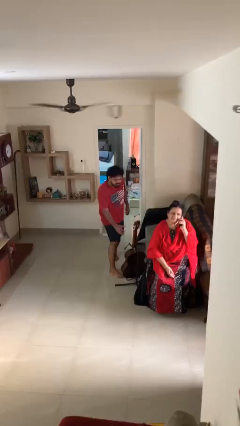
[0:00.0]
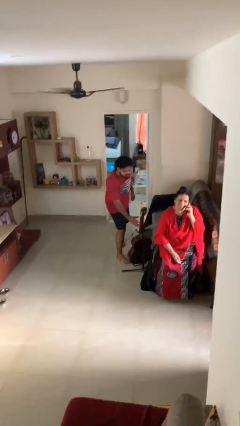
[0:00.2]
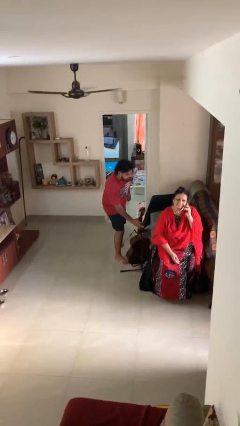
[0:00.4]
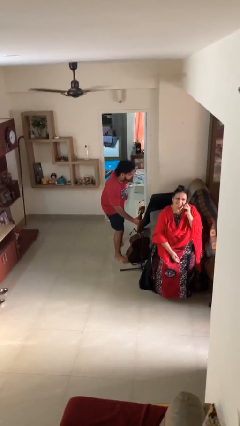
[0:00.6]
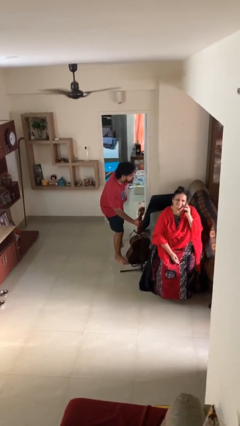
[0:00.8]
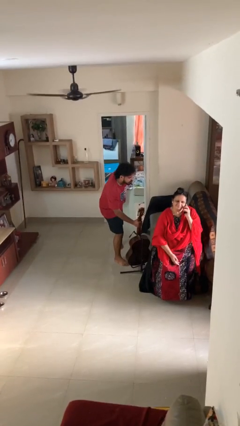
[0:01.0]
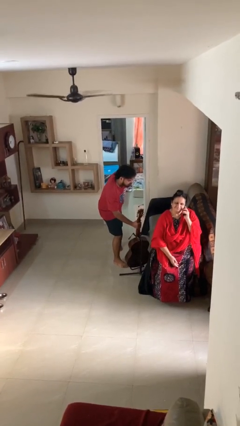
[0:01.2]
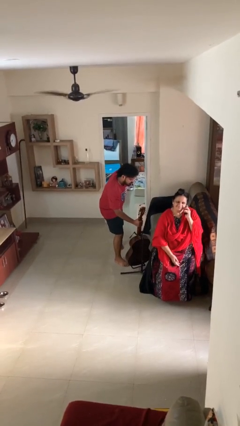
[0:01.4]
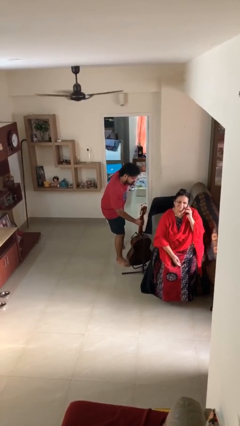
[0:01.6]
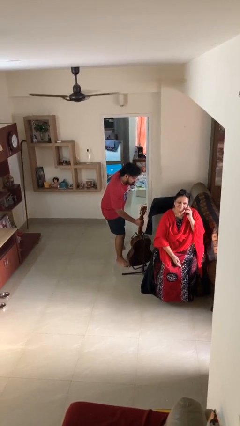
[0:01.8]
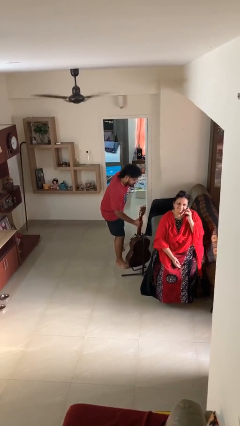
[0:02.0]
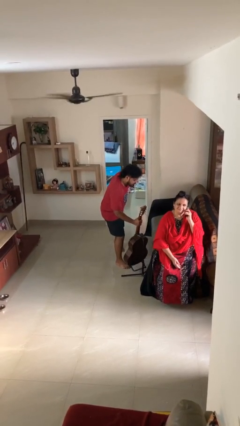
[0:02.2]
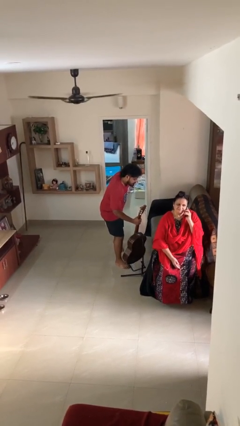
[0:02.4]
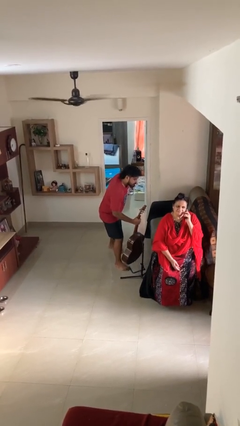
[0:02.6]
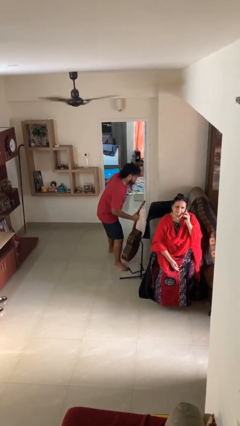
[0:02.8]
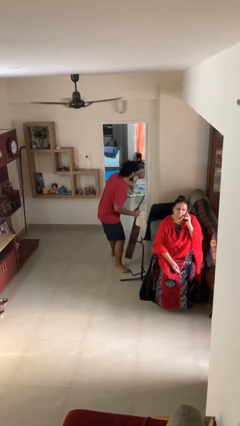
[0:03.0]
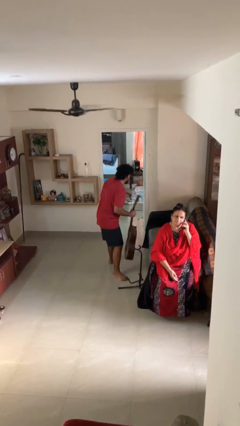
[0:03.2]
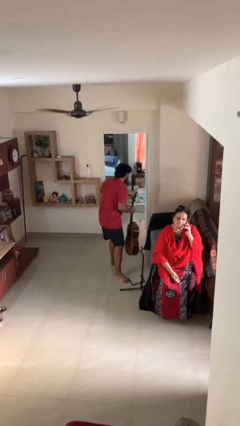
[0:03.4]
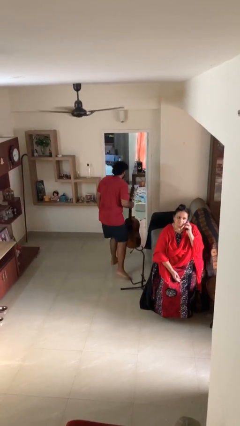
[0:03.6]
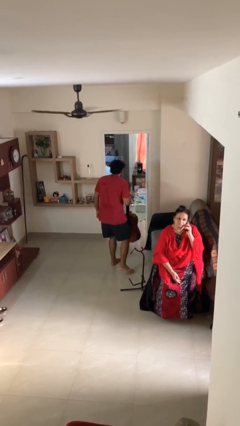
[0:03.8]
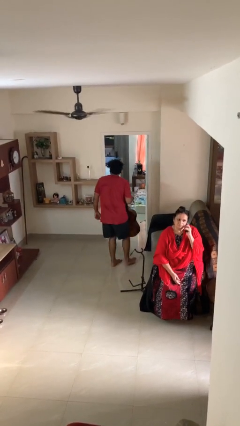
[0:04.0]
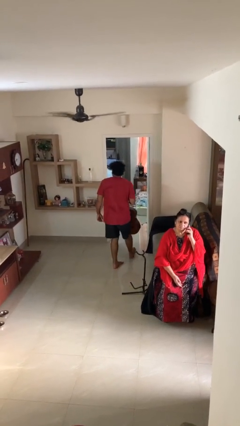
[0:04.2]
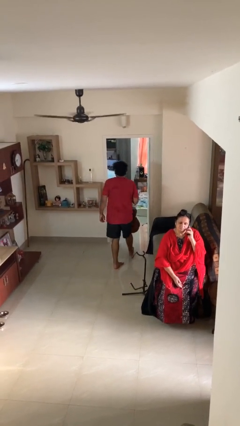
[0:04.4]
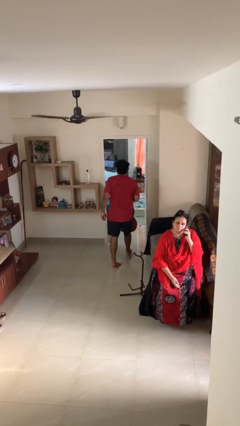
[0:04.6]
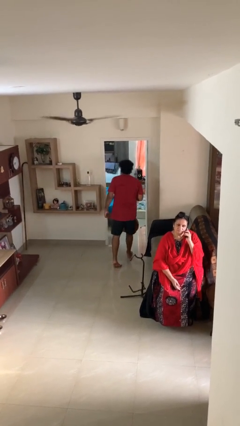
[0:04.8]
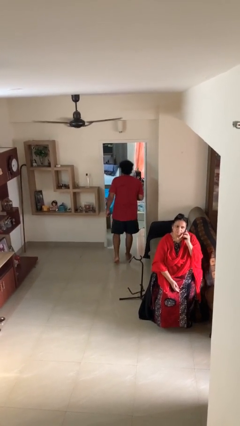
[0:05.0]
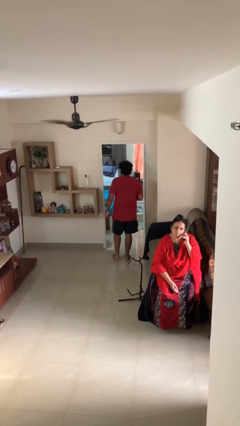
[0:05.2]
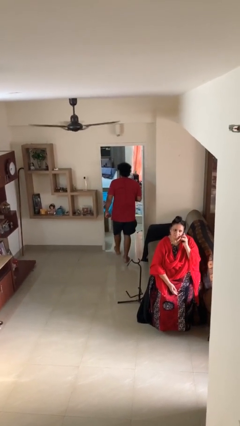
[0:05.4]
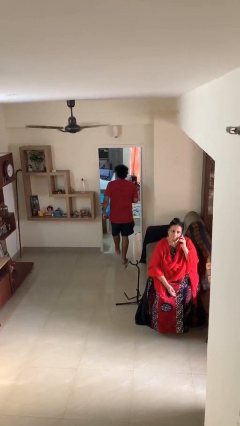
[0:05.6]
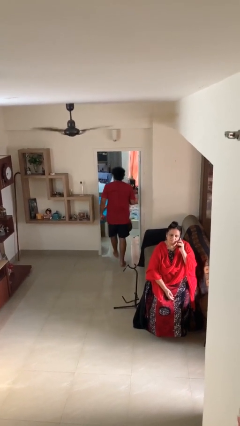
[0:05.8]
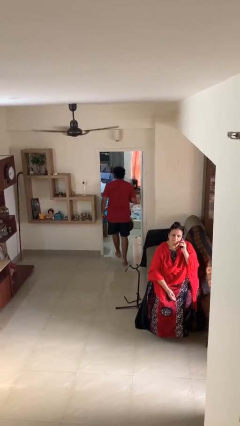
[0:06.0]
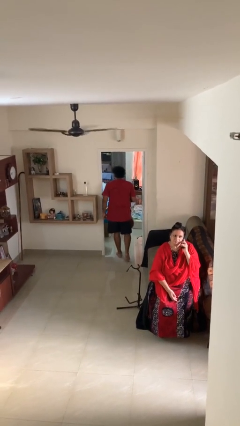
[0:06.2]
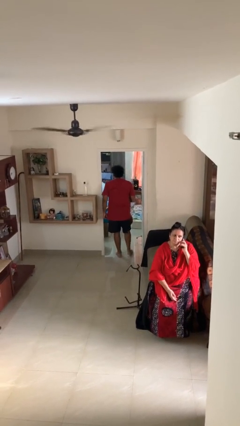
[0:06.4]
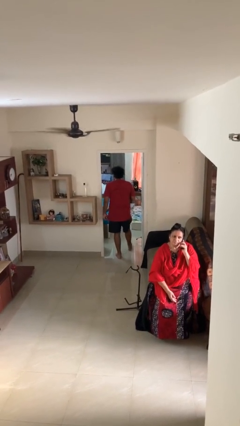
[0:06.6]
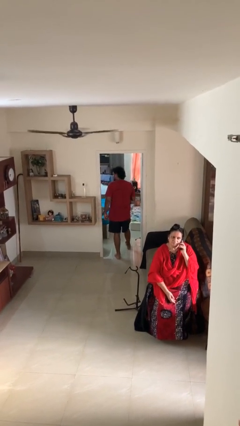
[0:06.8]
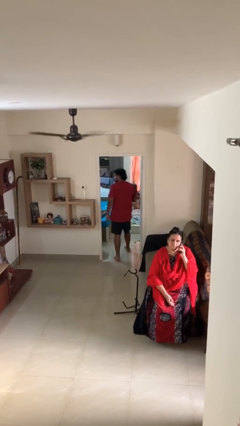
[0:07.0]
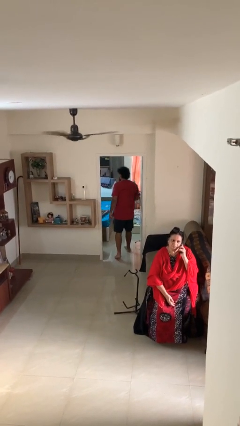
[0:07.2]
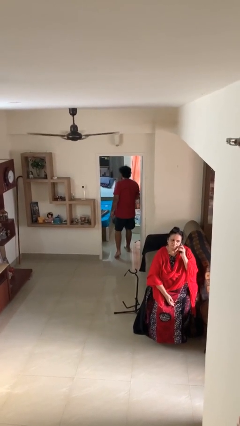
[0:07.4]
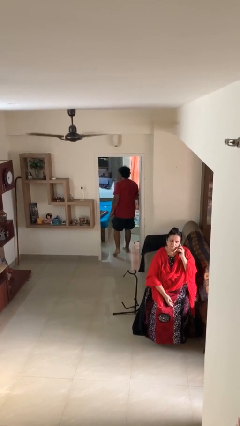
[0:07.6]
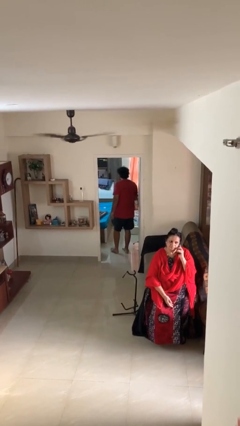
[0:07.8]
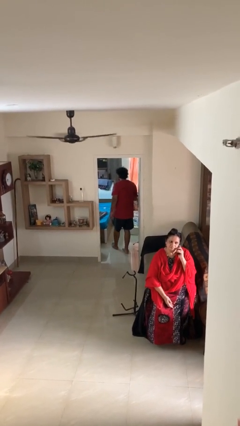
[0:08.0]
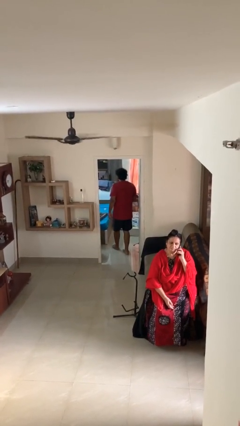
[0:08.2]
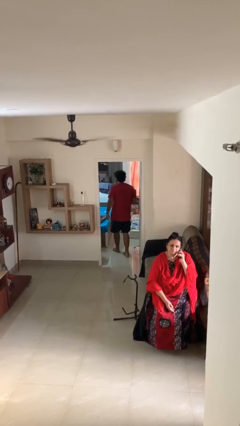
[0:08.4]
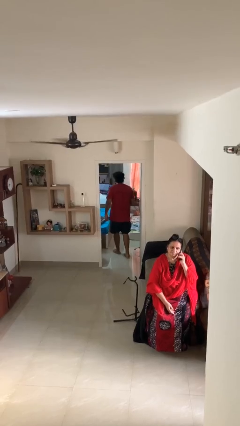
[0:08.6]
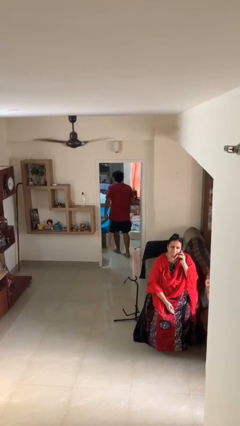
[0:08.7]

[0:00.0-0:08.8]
person steals object from person

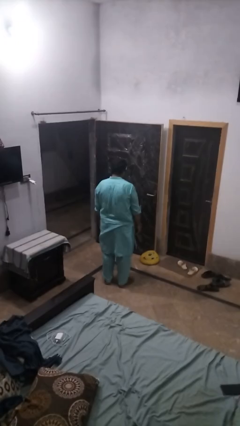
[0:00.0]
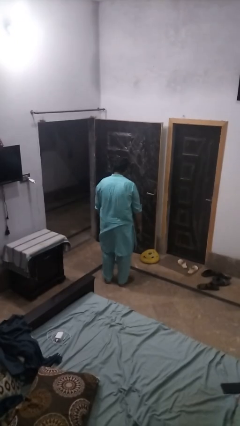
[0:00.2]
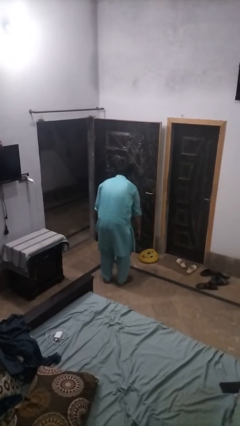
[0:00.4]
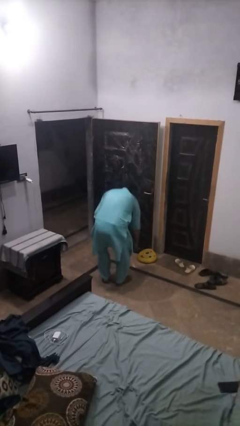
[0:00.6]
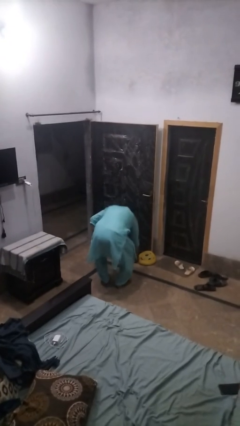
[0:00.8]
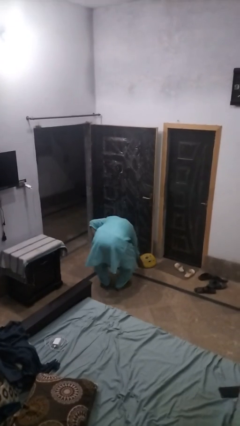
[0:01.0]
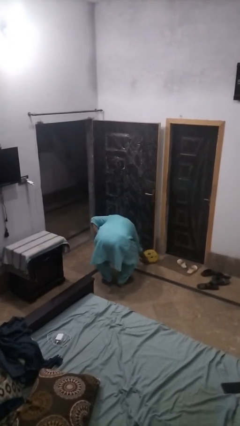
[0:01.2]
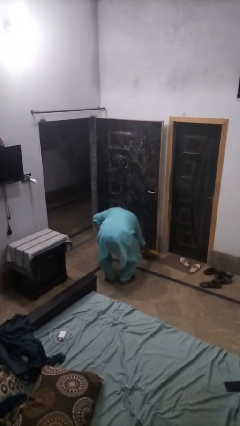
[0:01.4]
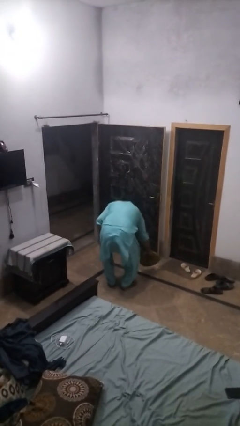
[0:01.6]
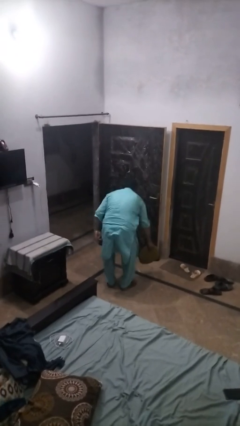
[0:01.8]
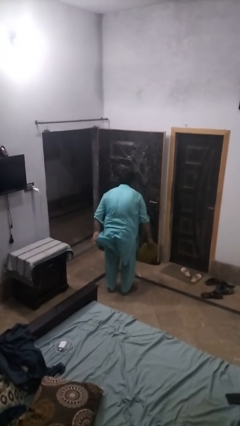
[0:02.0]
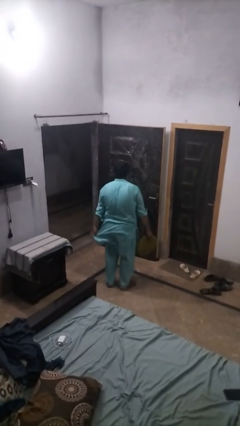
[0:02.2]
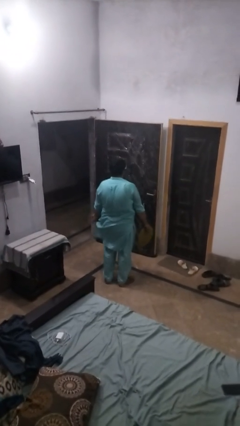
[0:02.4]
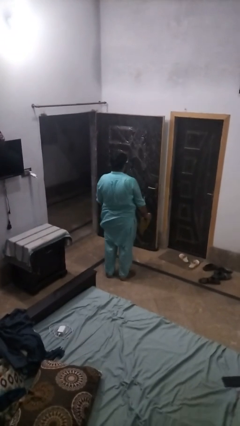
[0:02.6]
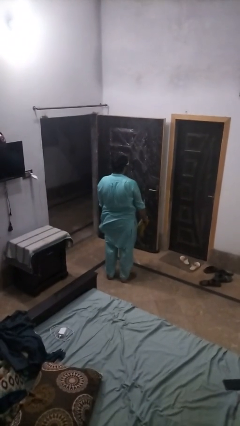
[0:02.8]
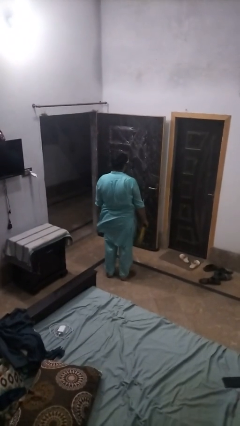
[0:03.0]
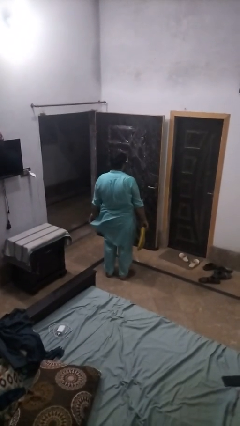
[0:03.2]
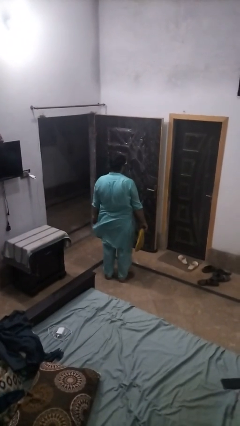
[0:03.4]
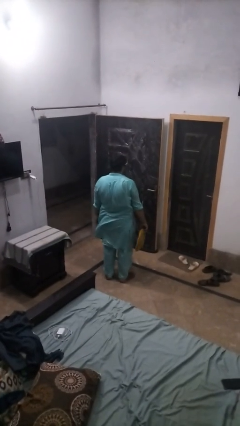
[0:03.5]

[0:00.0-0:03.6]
person picks up object from floor

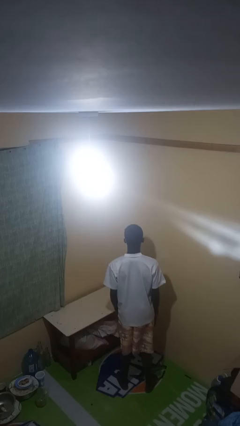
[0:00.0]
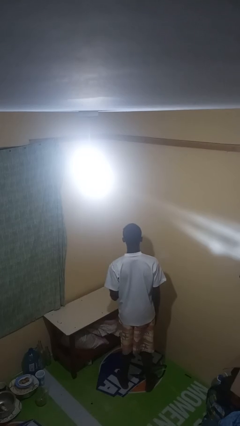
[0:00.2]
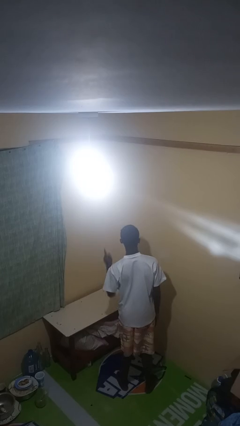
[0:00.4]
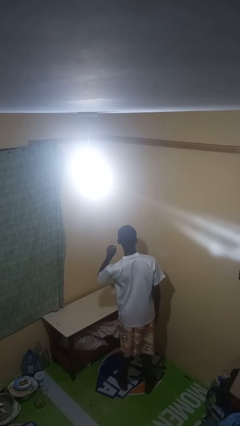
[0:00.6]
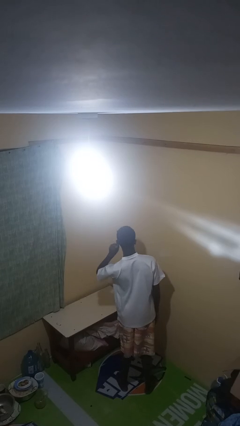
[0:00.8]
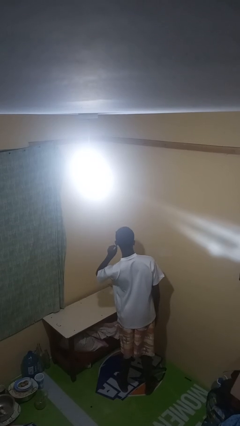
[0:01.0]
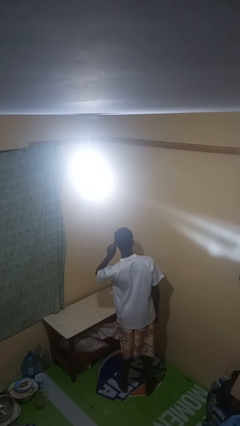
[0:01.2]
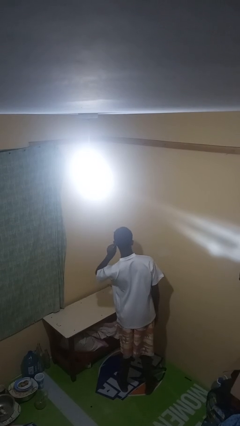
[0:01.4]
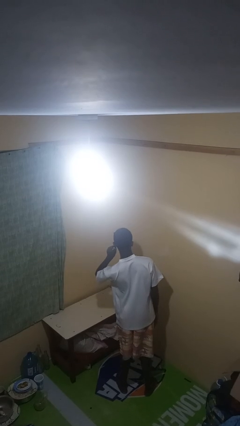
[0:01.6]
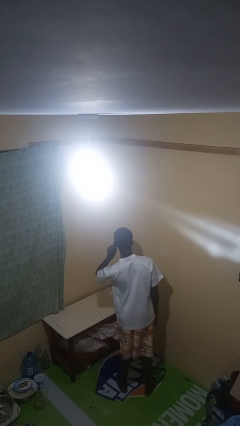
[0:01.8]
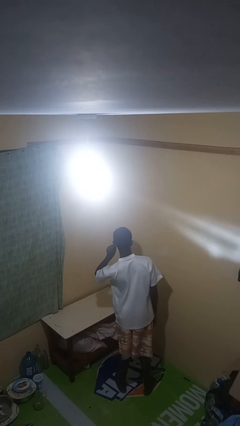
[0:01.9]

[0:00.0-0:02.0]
person gestures listen closely

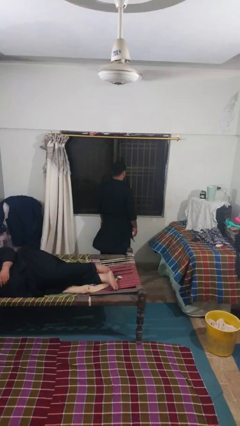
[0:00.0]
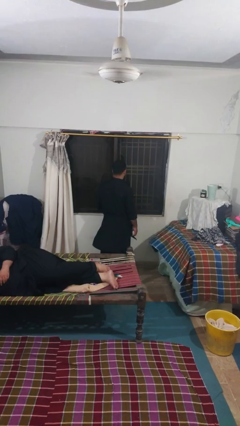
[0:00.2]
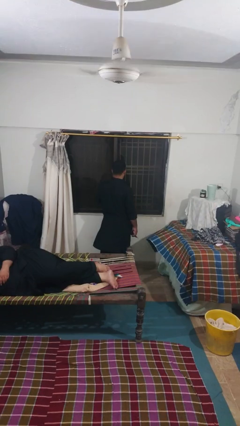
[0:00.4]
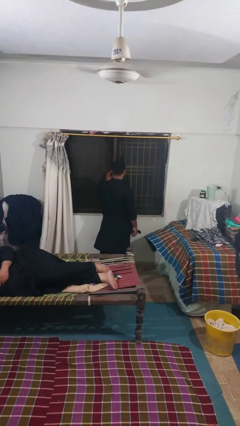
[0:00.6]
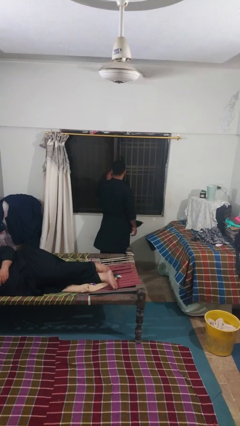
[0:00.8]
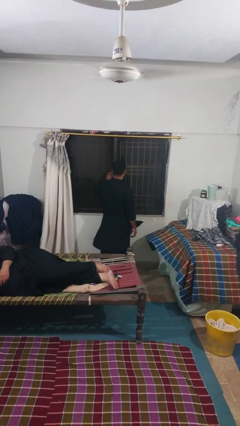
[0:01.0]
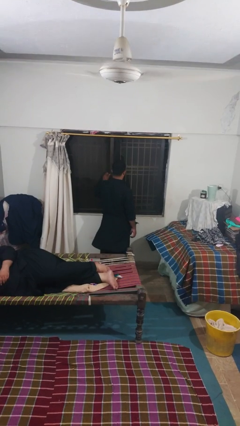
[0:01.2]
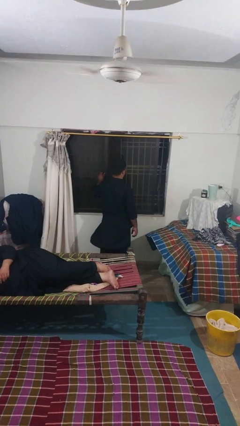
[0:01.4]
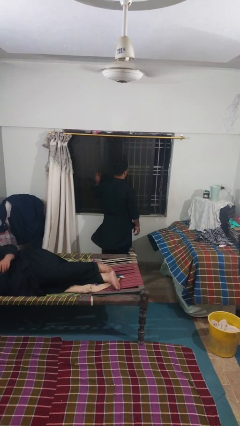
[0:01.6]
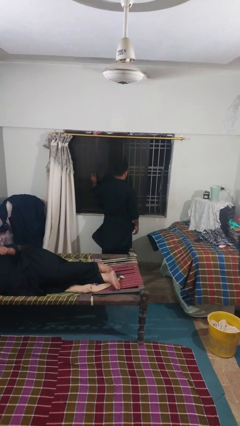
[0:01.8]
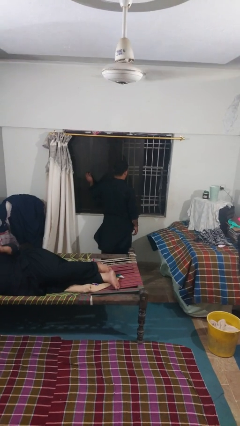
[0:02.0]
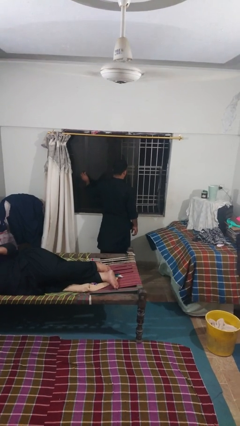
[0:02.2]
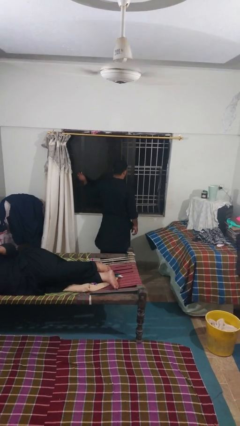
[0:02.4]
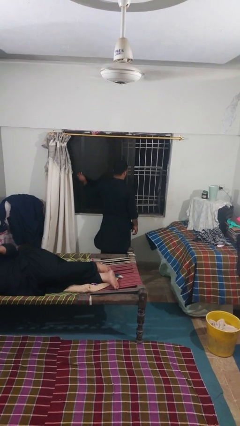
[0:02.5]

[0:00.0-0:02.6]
person opens sliding door

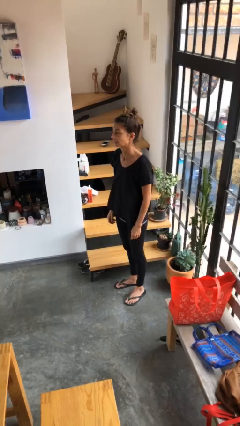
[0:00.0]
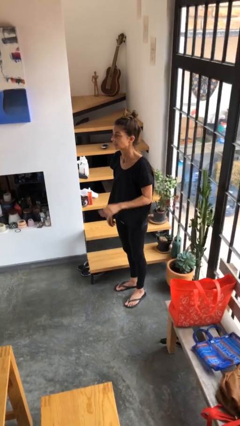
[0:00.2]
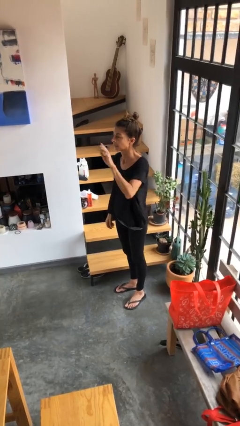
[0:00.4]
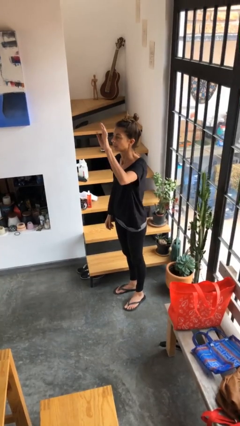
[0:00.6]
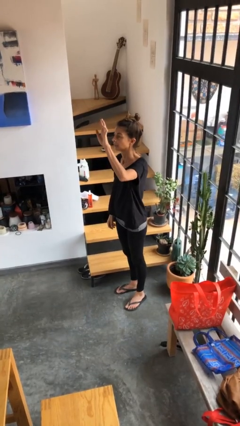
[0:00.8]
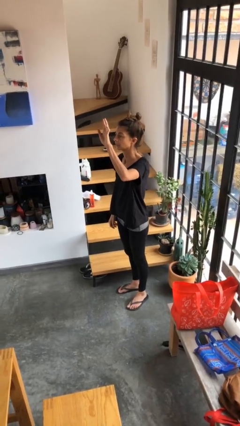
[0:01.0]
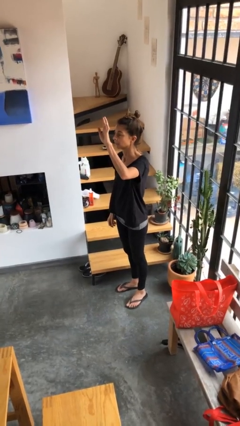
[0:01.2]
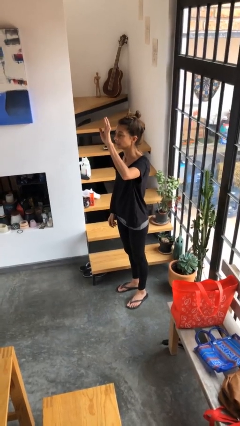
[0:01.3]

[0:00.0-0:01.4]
person gestures raise hand
